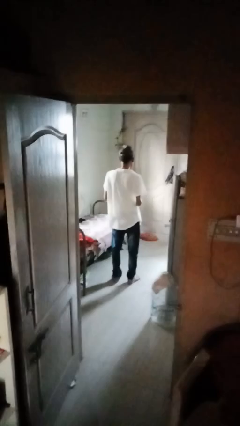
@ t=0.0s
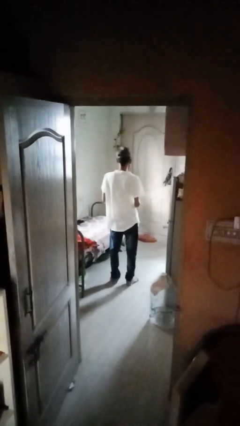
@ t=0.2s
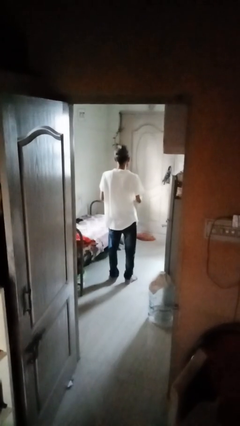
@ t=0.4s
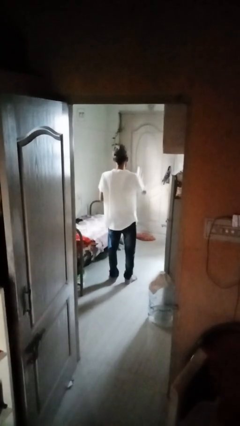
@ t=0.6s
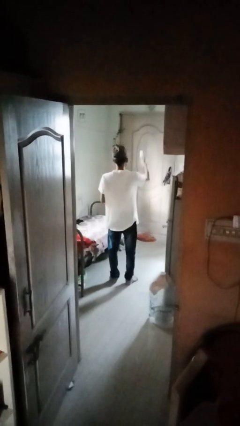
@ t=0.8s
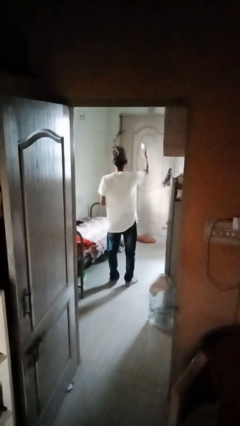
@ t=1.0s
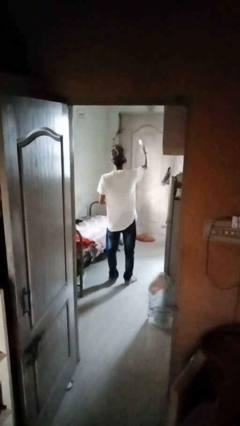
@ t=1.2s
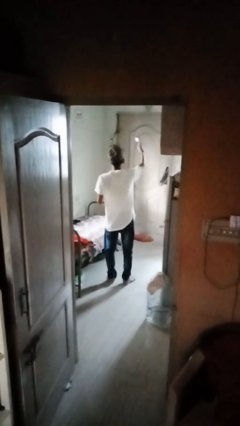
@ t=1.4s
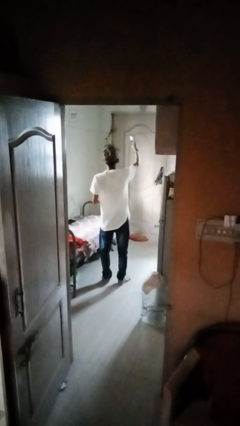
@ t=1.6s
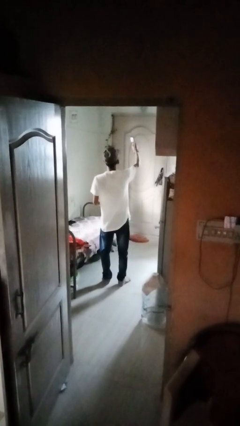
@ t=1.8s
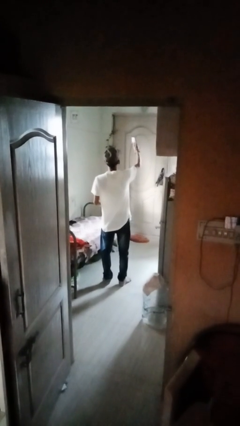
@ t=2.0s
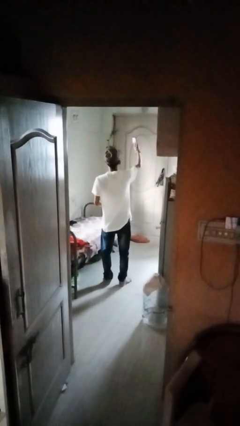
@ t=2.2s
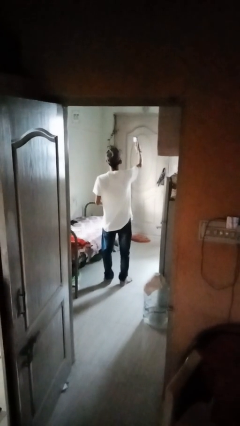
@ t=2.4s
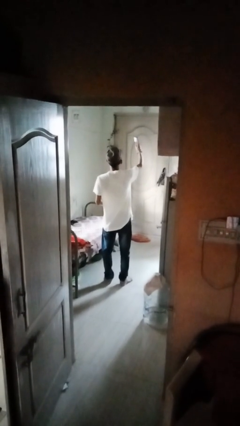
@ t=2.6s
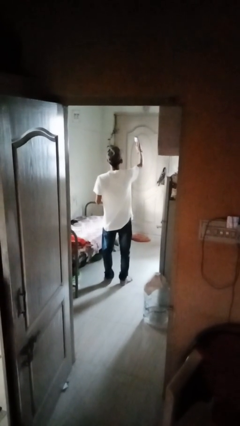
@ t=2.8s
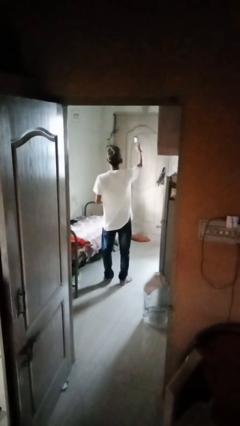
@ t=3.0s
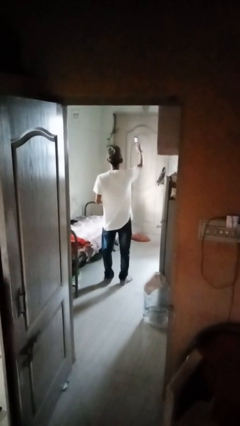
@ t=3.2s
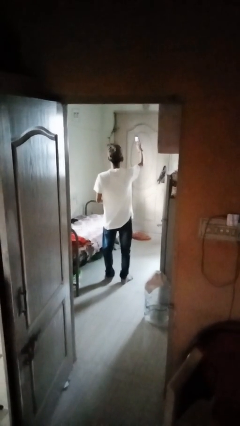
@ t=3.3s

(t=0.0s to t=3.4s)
person takes selfie

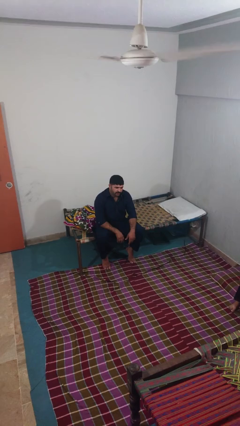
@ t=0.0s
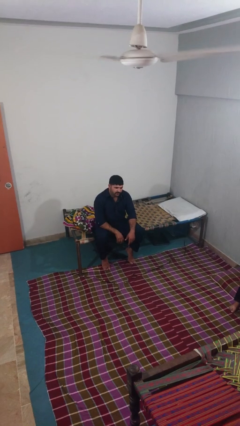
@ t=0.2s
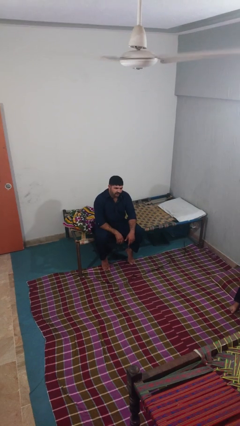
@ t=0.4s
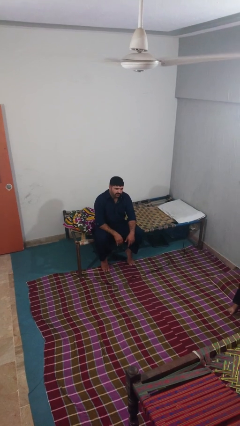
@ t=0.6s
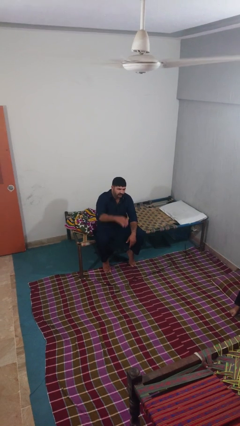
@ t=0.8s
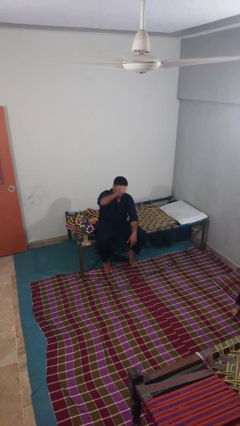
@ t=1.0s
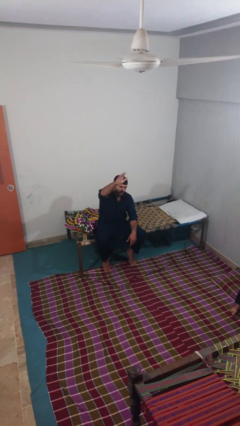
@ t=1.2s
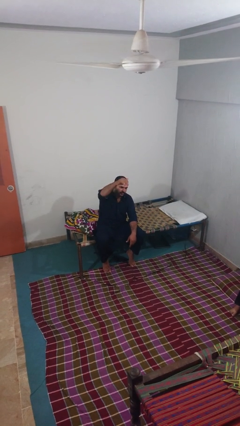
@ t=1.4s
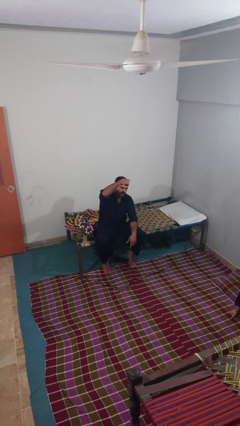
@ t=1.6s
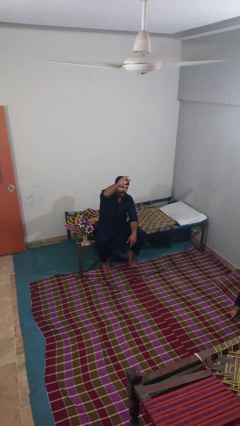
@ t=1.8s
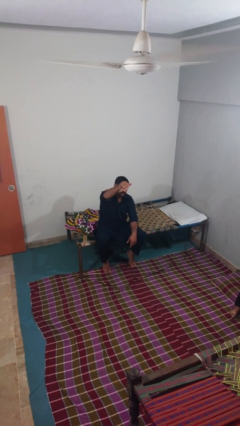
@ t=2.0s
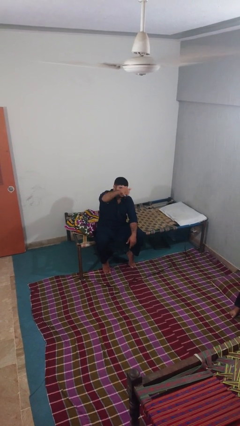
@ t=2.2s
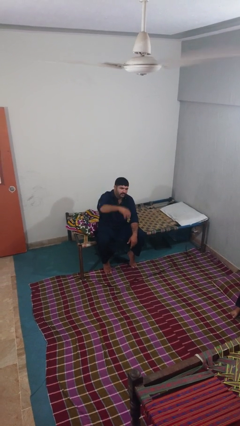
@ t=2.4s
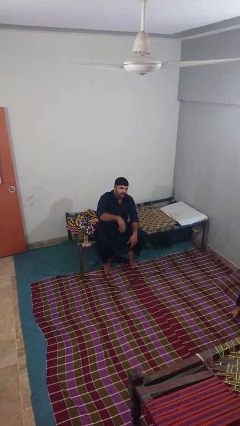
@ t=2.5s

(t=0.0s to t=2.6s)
person gestures come here

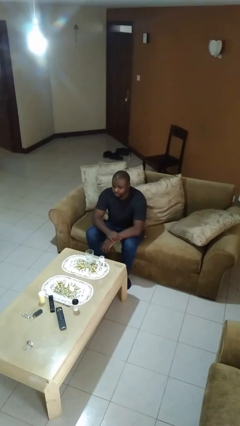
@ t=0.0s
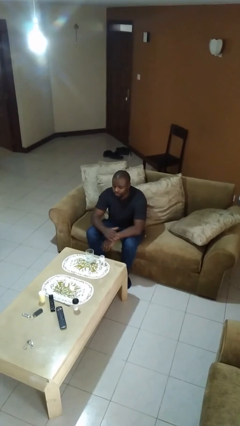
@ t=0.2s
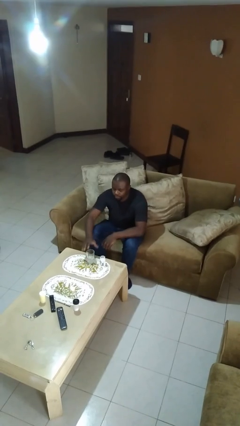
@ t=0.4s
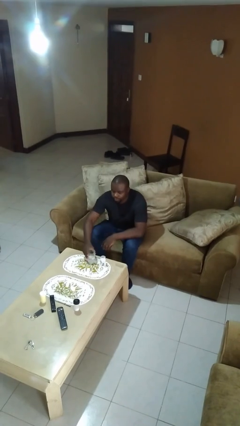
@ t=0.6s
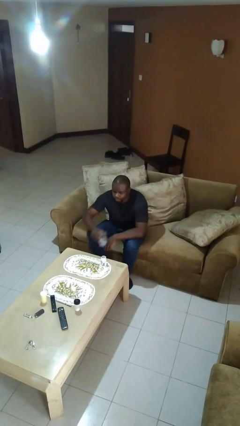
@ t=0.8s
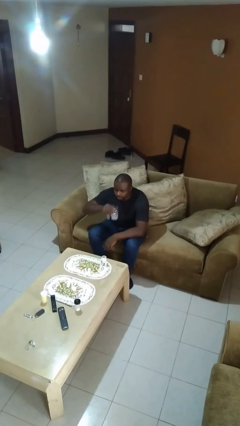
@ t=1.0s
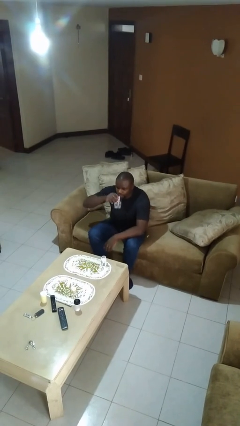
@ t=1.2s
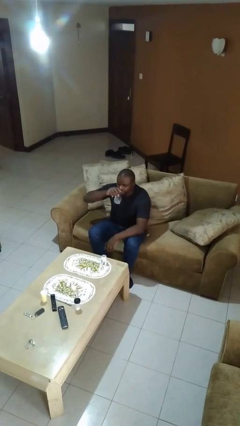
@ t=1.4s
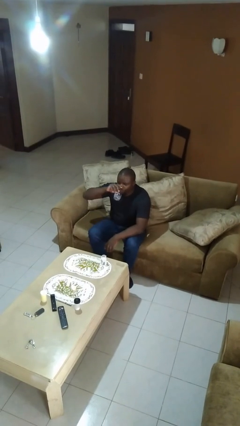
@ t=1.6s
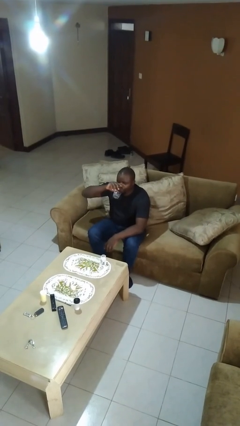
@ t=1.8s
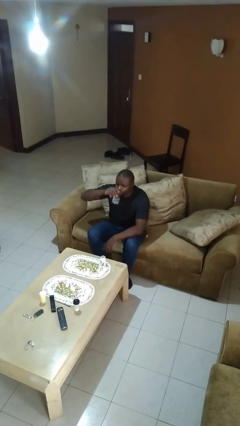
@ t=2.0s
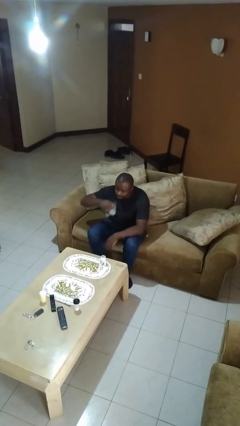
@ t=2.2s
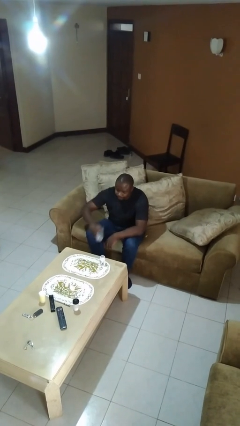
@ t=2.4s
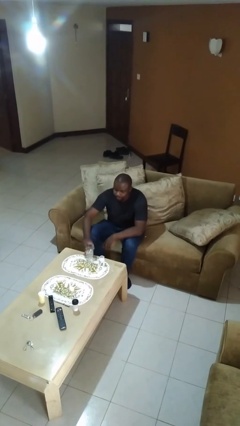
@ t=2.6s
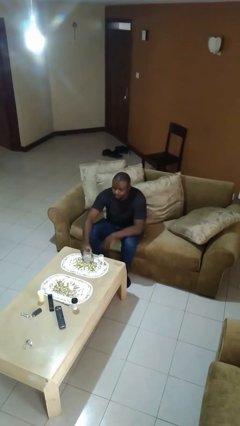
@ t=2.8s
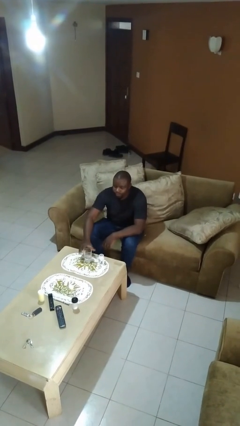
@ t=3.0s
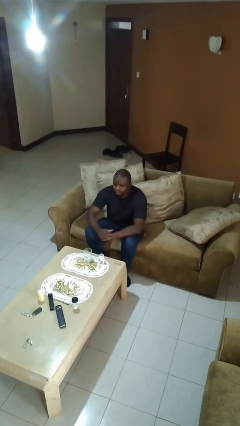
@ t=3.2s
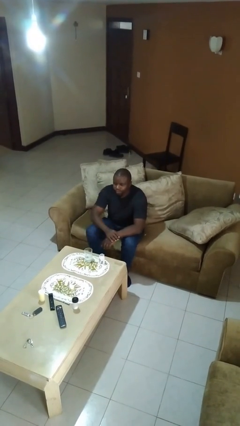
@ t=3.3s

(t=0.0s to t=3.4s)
person drinks from cup

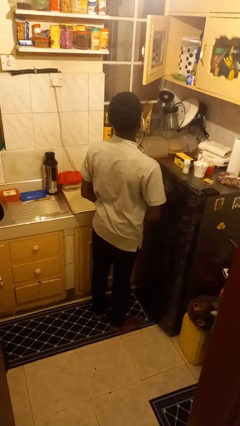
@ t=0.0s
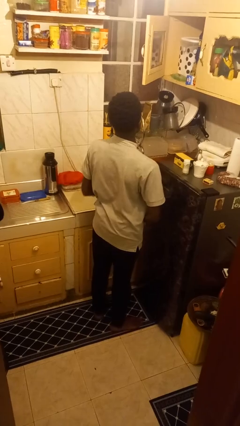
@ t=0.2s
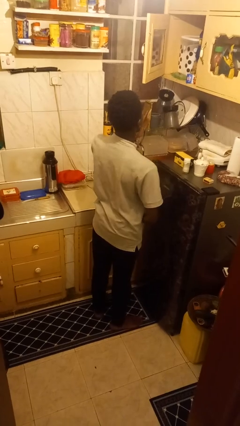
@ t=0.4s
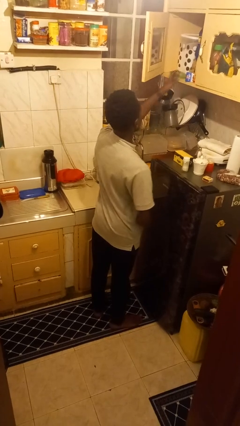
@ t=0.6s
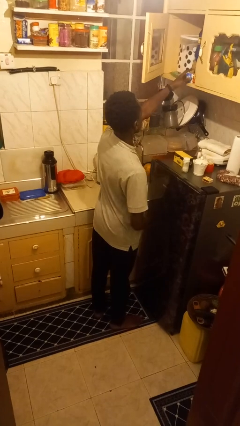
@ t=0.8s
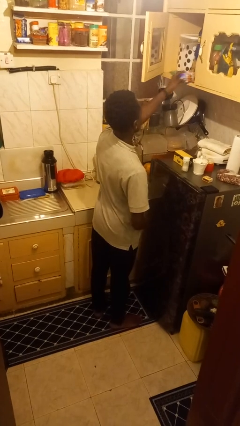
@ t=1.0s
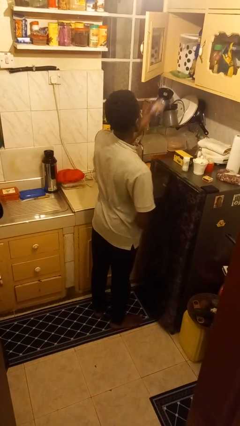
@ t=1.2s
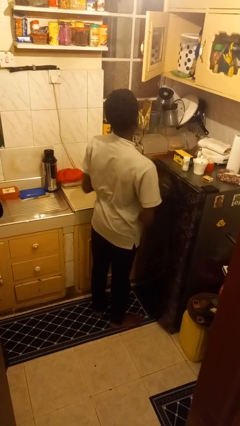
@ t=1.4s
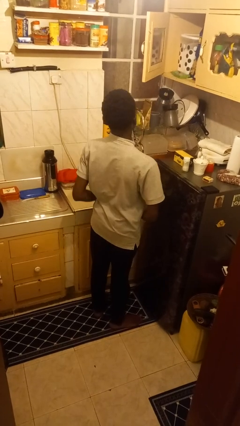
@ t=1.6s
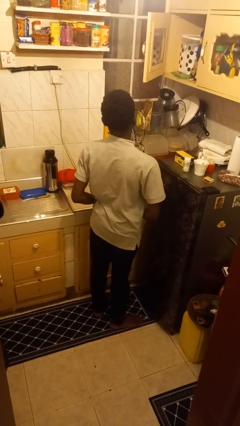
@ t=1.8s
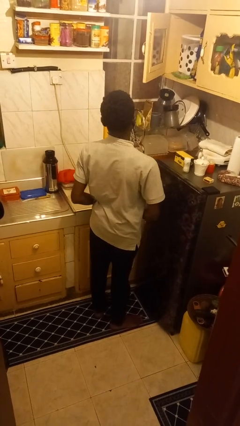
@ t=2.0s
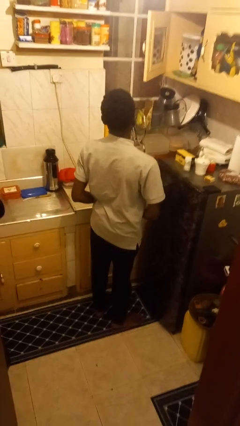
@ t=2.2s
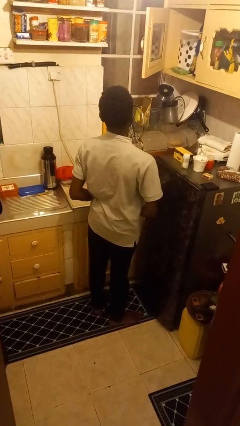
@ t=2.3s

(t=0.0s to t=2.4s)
person picks up object from cabinet

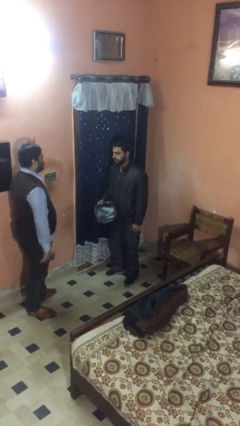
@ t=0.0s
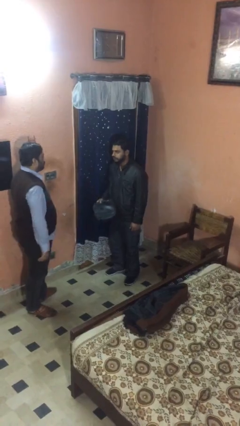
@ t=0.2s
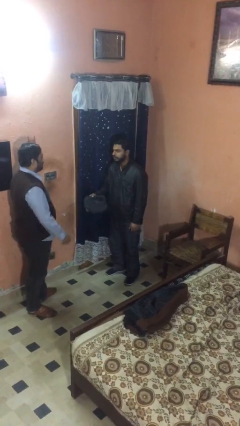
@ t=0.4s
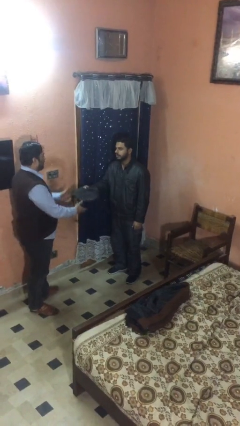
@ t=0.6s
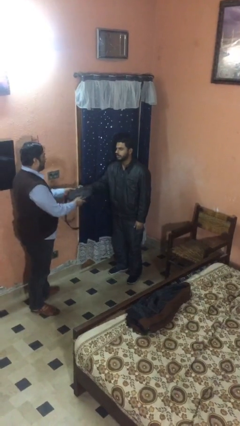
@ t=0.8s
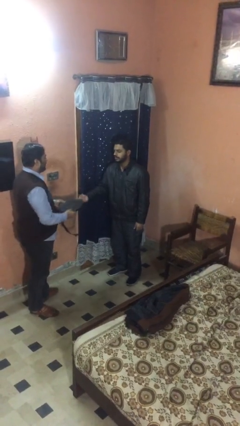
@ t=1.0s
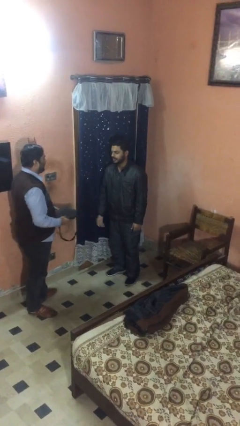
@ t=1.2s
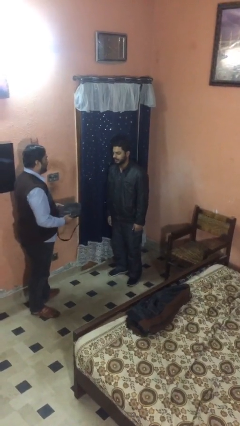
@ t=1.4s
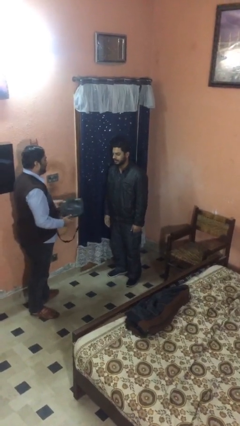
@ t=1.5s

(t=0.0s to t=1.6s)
person transfers object to person

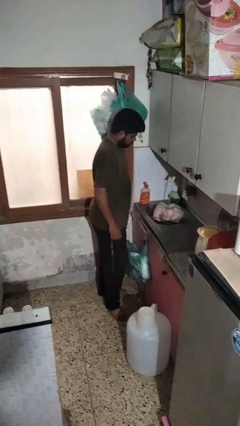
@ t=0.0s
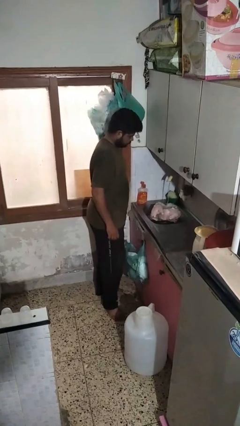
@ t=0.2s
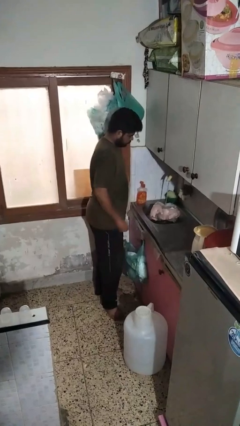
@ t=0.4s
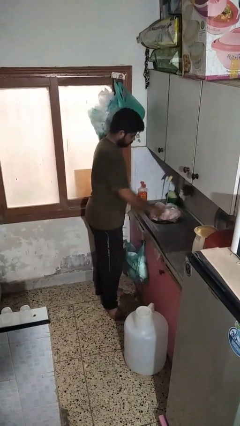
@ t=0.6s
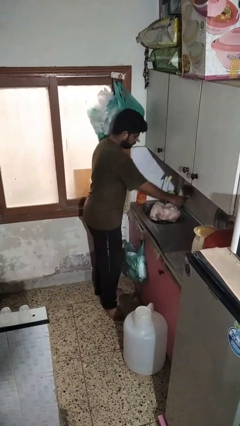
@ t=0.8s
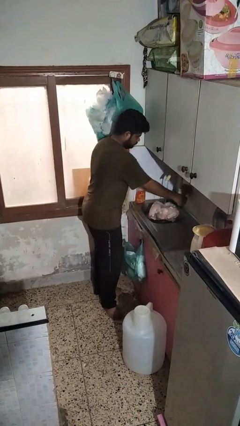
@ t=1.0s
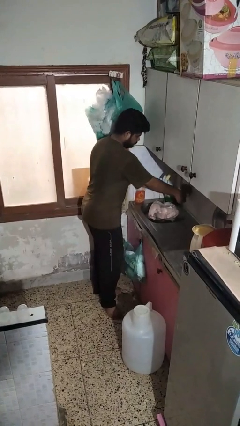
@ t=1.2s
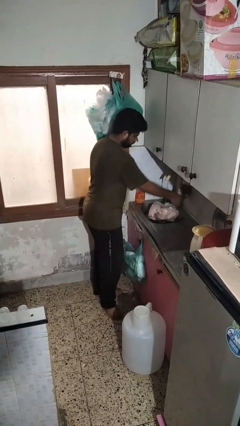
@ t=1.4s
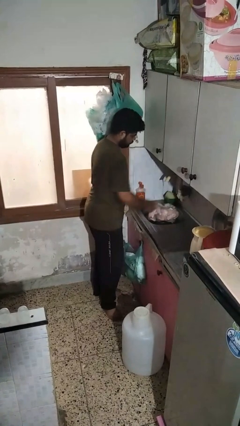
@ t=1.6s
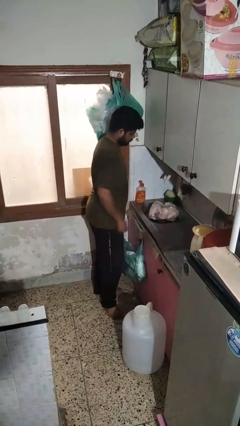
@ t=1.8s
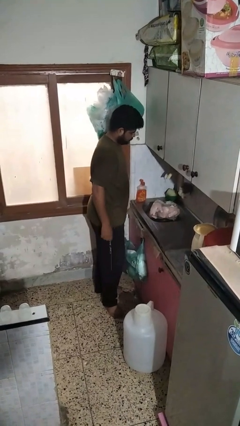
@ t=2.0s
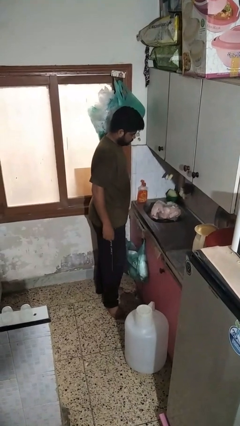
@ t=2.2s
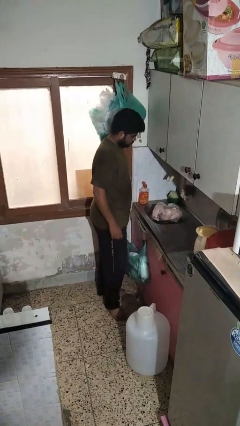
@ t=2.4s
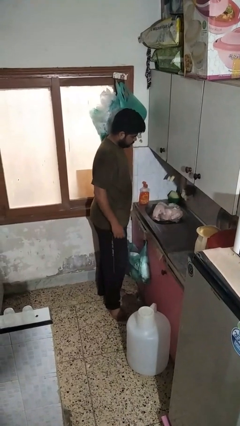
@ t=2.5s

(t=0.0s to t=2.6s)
person turns off faucet

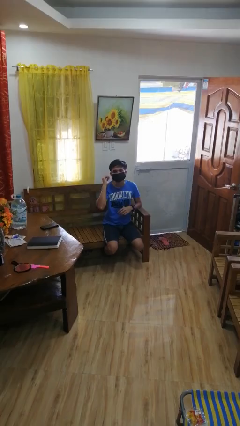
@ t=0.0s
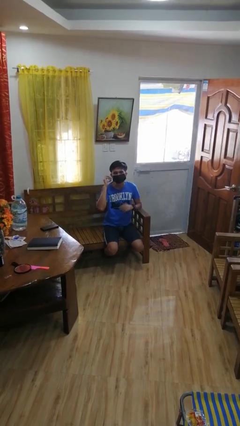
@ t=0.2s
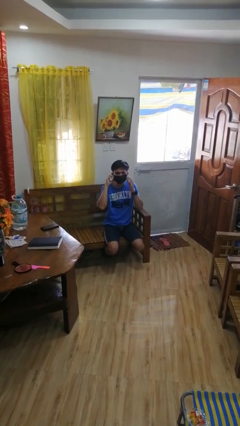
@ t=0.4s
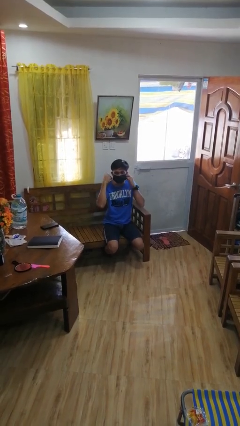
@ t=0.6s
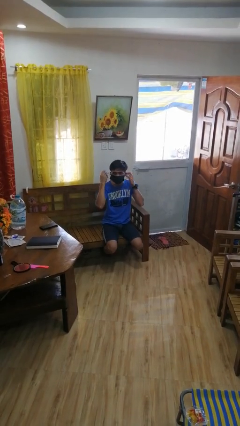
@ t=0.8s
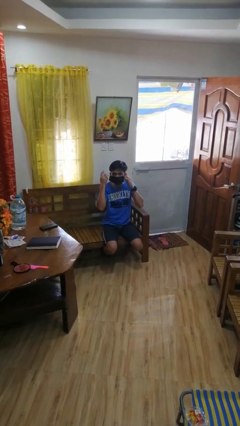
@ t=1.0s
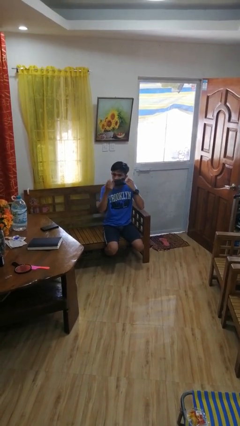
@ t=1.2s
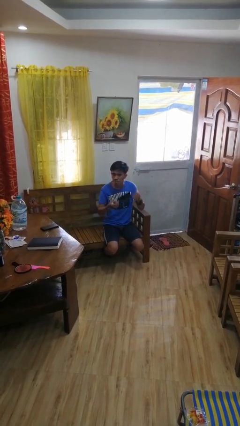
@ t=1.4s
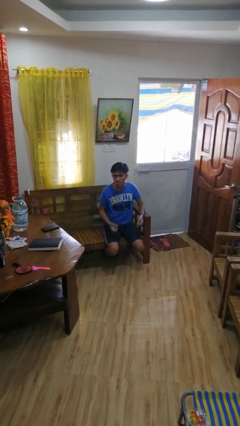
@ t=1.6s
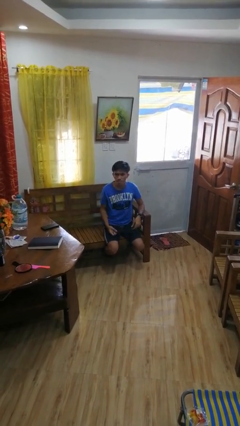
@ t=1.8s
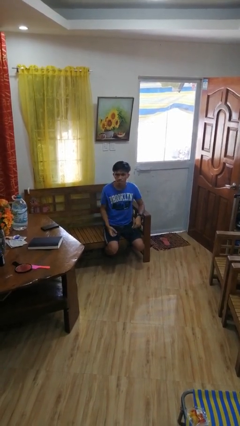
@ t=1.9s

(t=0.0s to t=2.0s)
person takes off facemask
